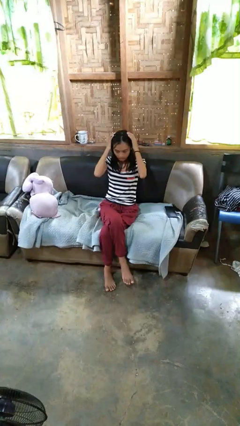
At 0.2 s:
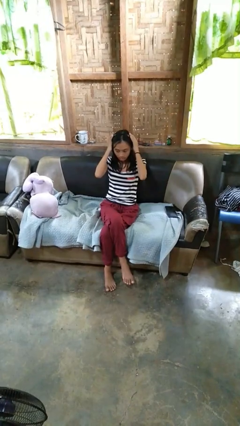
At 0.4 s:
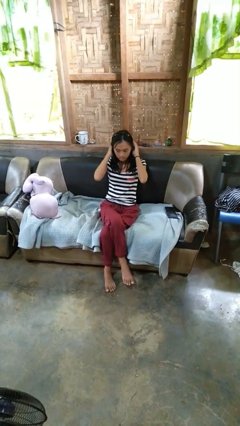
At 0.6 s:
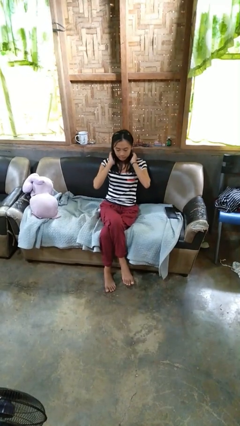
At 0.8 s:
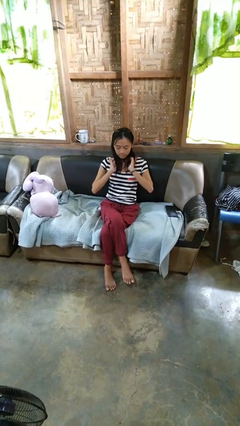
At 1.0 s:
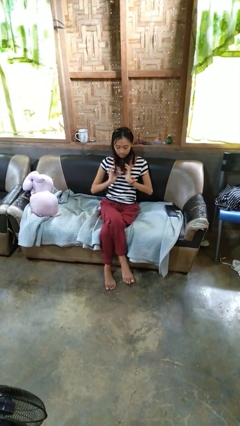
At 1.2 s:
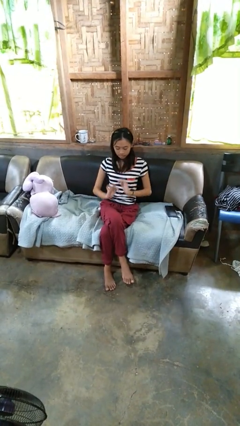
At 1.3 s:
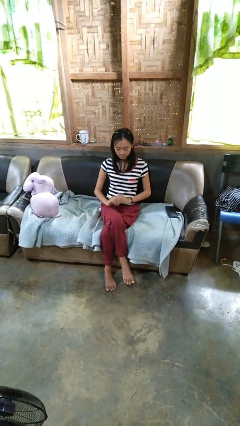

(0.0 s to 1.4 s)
person strokes hair

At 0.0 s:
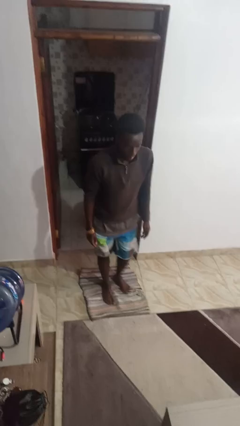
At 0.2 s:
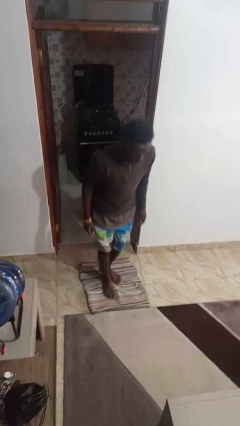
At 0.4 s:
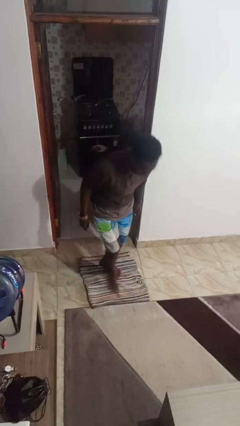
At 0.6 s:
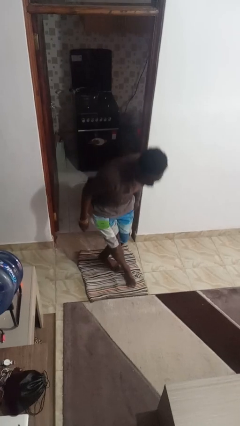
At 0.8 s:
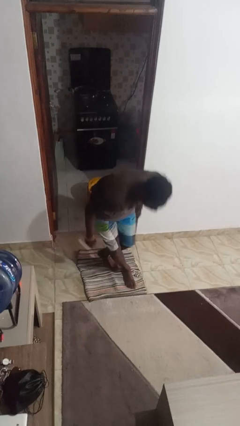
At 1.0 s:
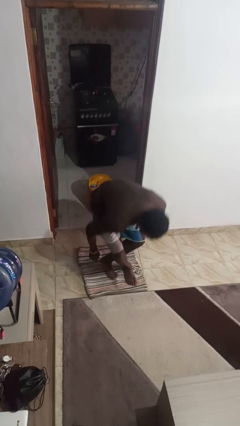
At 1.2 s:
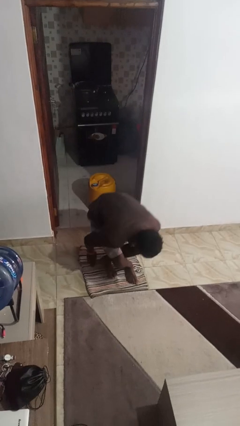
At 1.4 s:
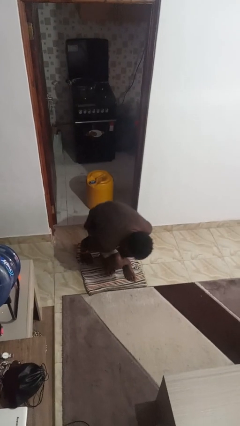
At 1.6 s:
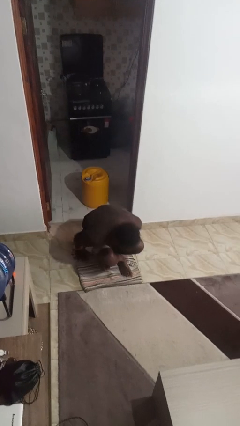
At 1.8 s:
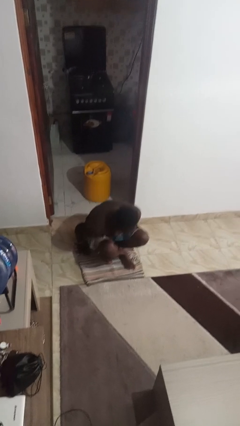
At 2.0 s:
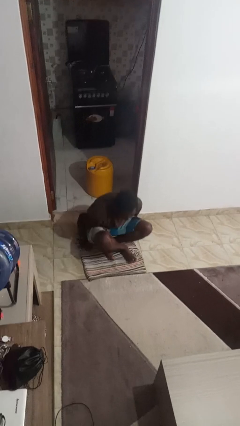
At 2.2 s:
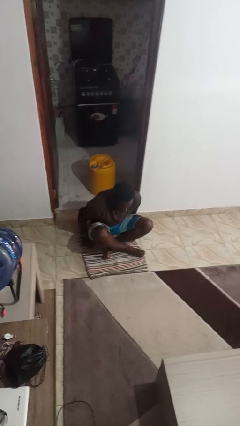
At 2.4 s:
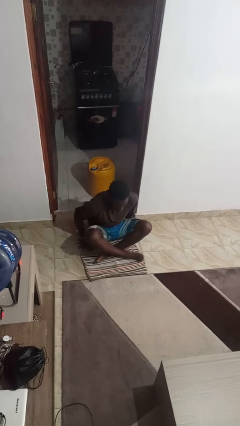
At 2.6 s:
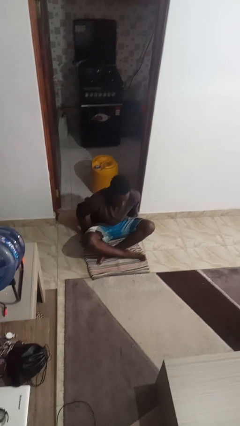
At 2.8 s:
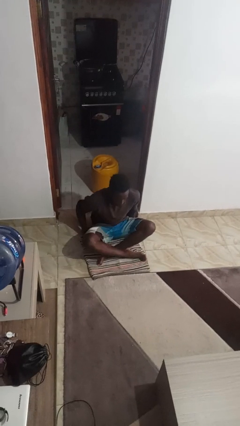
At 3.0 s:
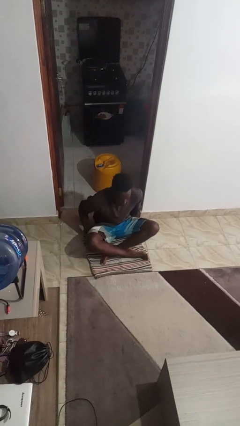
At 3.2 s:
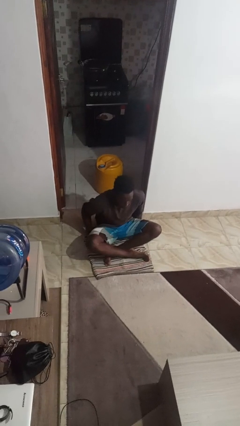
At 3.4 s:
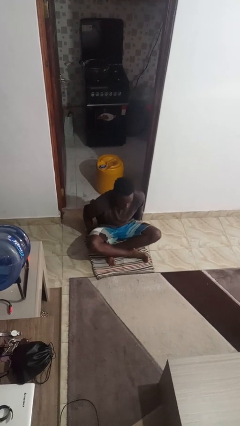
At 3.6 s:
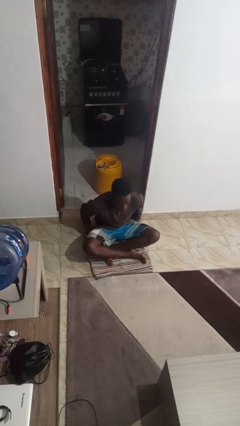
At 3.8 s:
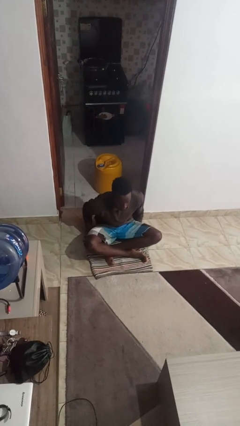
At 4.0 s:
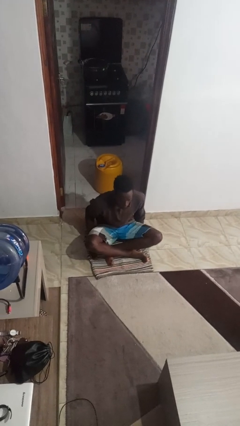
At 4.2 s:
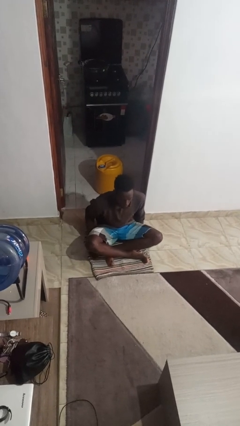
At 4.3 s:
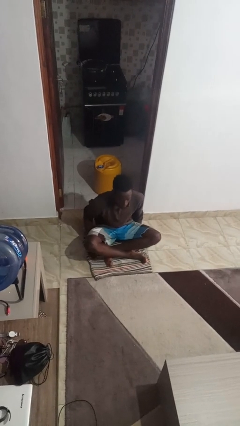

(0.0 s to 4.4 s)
person sits crisscross

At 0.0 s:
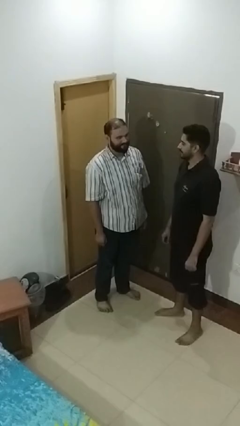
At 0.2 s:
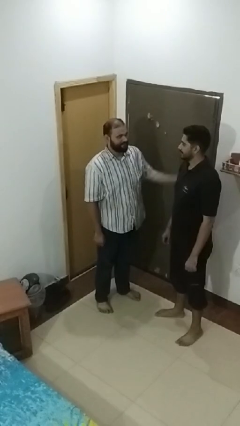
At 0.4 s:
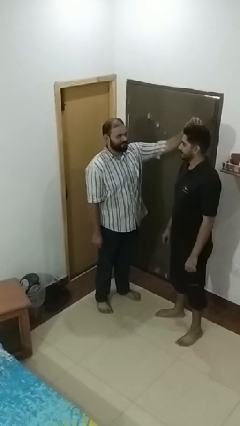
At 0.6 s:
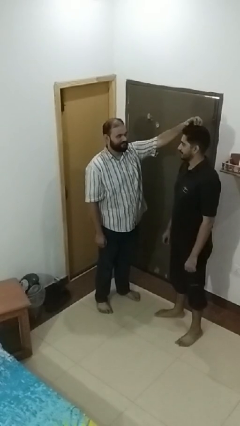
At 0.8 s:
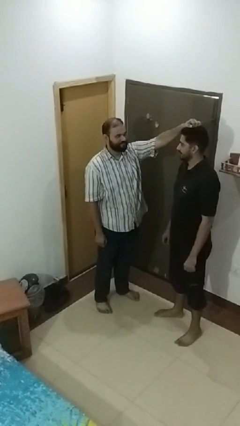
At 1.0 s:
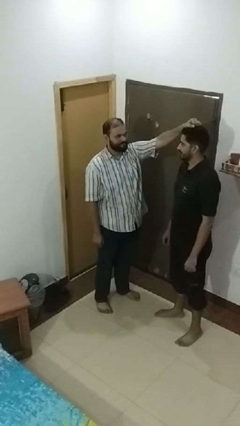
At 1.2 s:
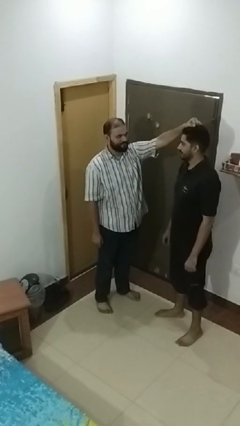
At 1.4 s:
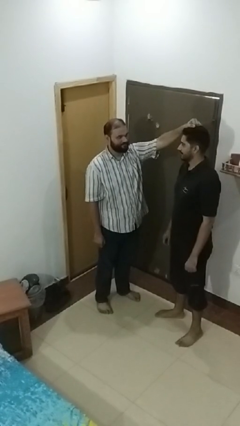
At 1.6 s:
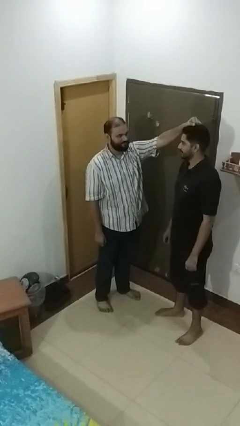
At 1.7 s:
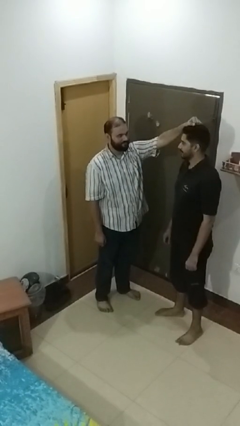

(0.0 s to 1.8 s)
person grabs person by hair

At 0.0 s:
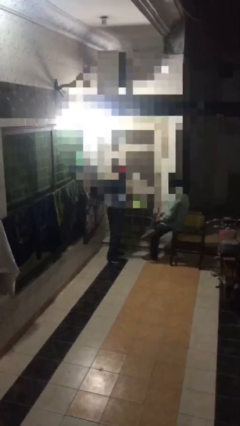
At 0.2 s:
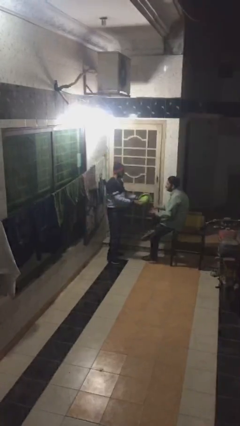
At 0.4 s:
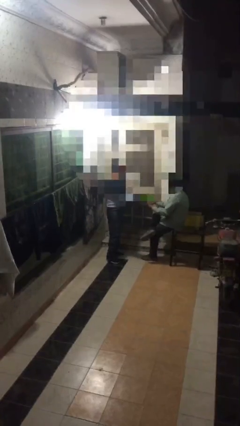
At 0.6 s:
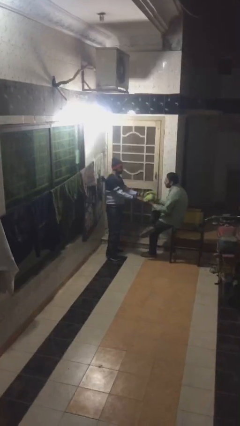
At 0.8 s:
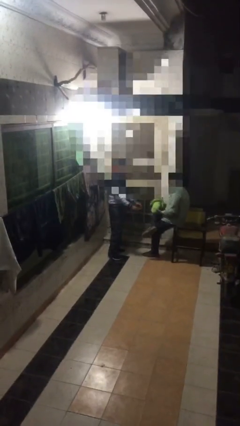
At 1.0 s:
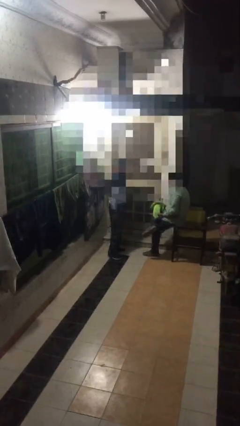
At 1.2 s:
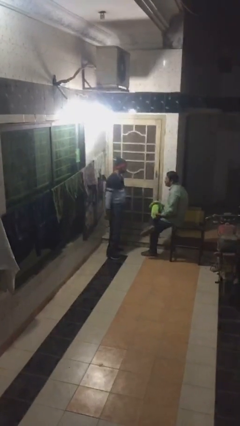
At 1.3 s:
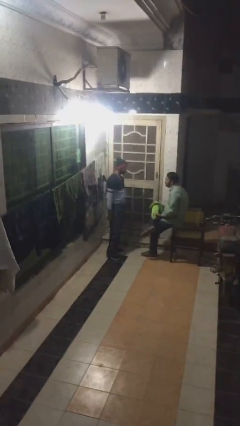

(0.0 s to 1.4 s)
person transfers object to person

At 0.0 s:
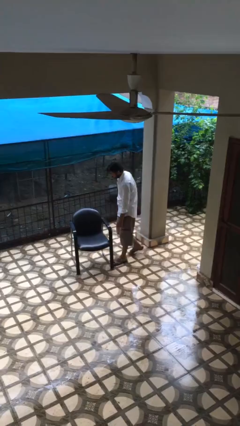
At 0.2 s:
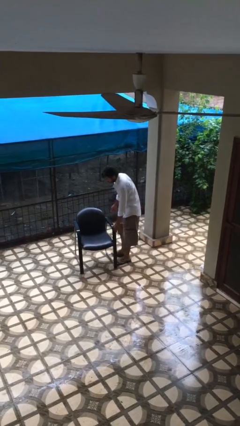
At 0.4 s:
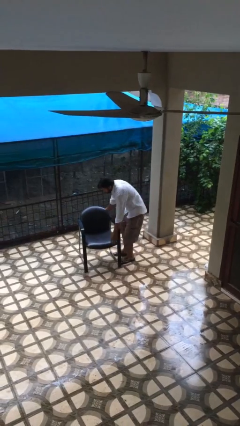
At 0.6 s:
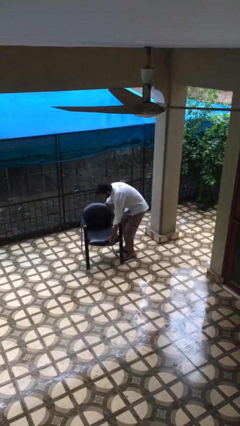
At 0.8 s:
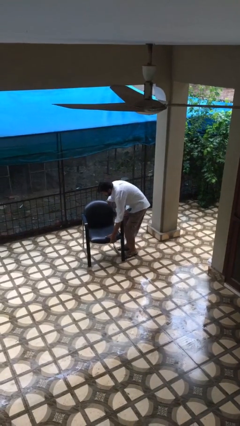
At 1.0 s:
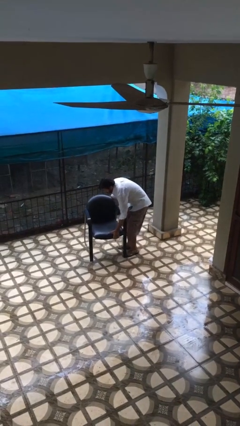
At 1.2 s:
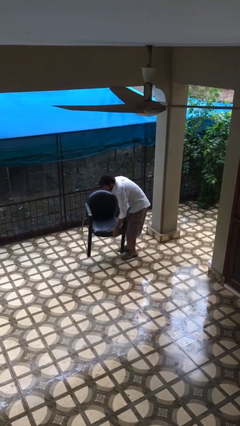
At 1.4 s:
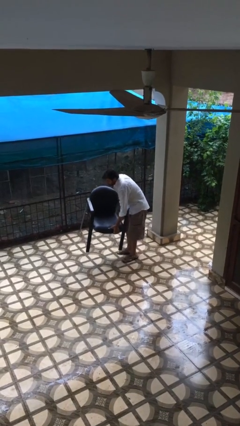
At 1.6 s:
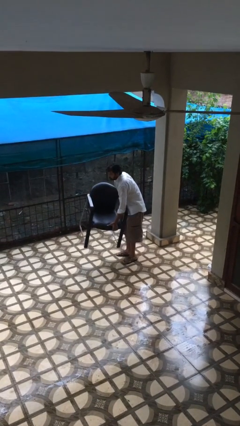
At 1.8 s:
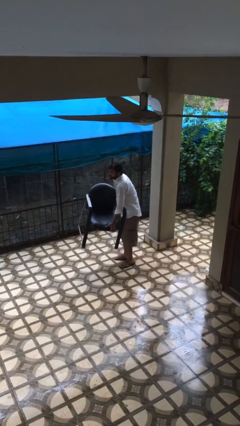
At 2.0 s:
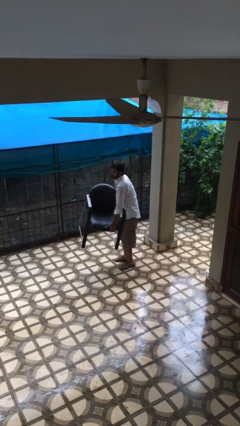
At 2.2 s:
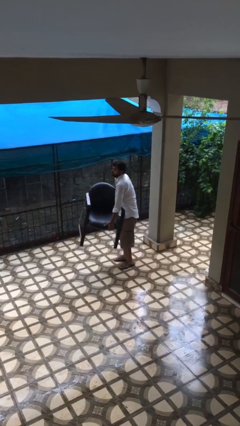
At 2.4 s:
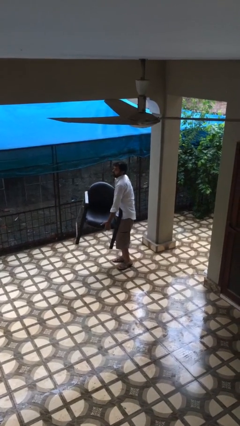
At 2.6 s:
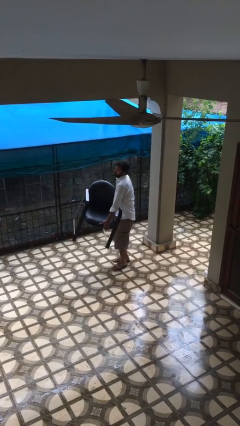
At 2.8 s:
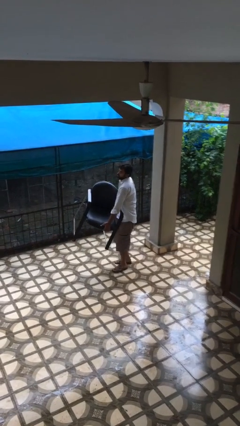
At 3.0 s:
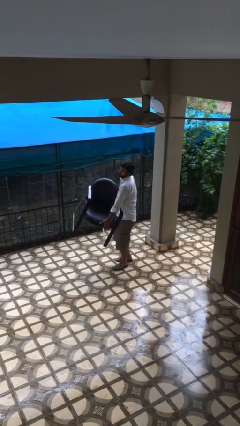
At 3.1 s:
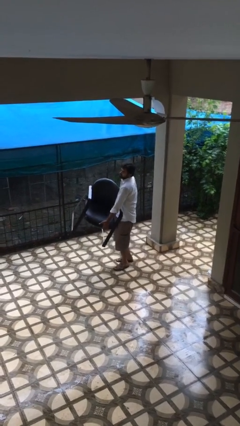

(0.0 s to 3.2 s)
person picks up object from floor

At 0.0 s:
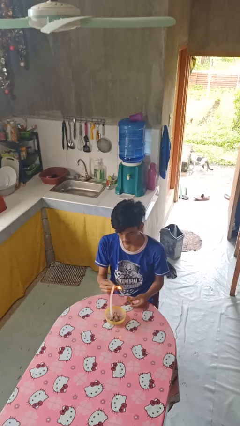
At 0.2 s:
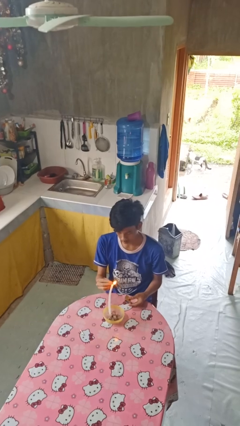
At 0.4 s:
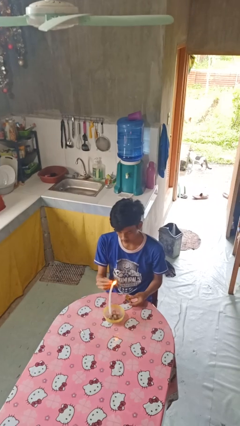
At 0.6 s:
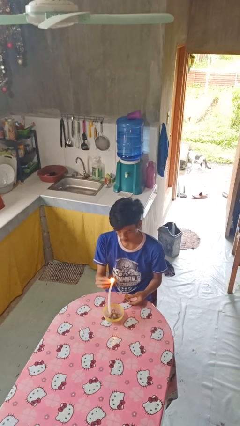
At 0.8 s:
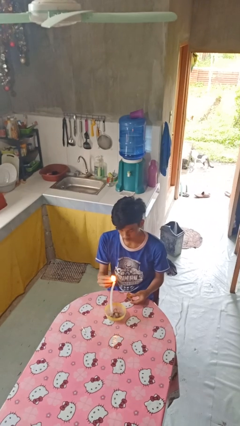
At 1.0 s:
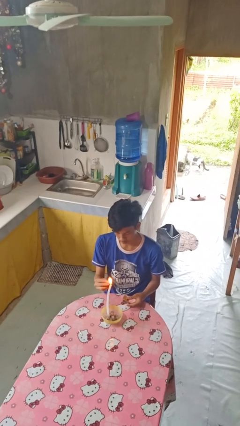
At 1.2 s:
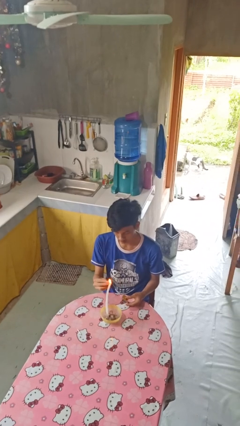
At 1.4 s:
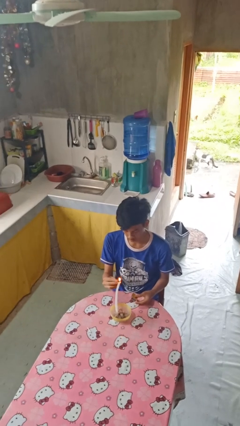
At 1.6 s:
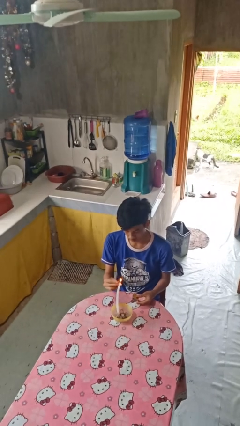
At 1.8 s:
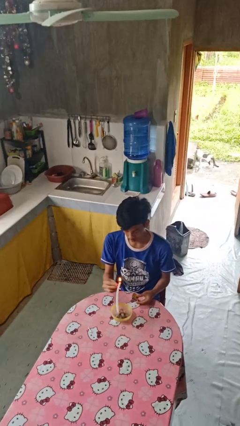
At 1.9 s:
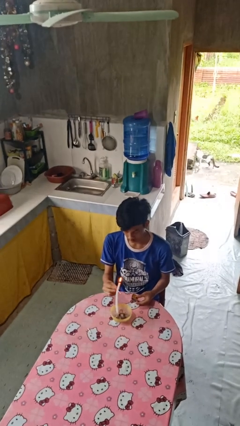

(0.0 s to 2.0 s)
person lights candle

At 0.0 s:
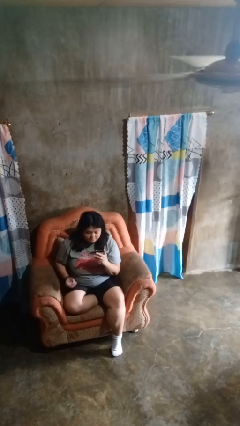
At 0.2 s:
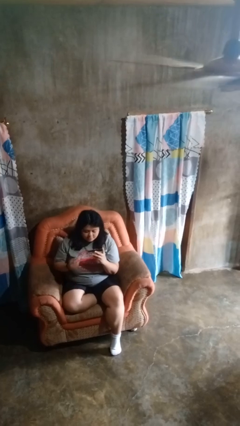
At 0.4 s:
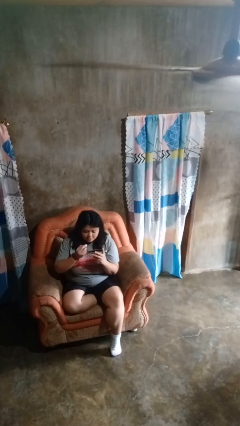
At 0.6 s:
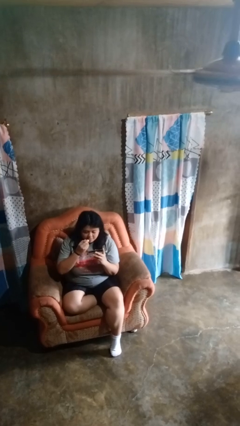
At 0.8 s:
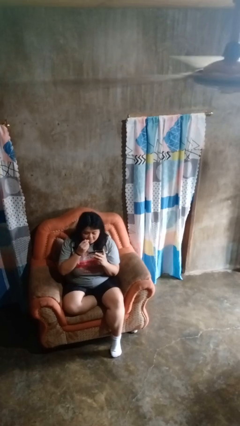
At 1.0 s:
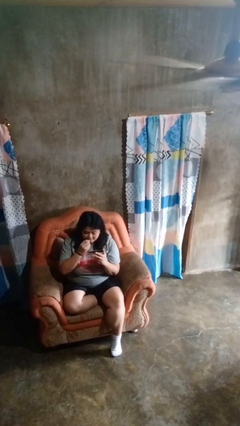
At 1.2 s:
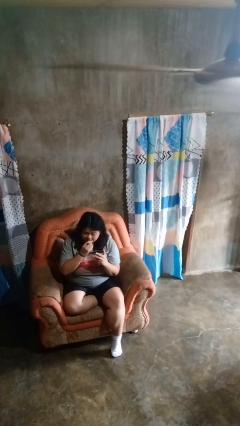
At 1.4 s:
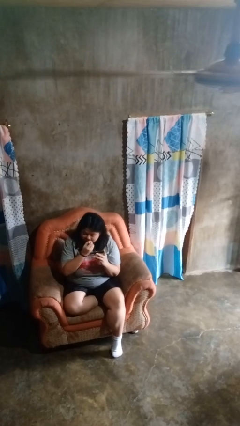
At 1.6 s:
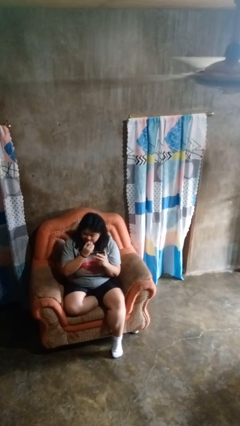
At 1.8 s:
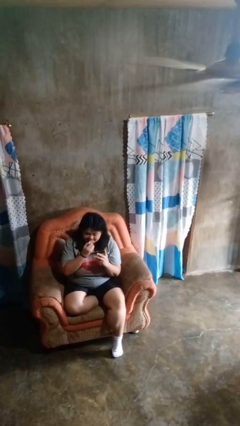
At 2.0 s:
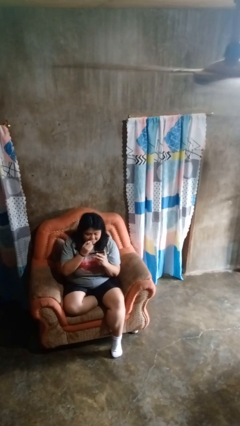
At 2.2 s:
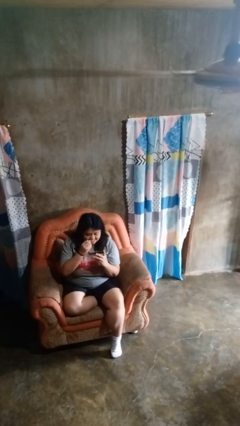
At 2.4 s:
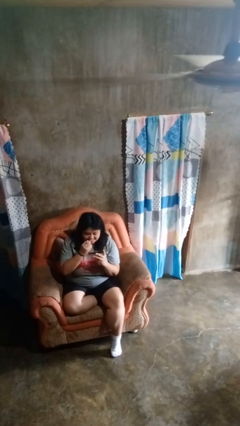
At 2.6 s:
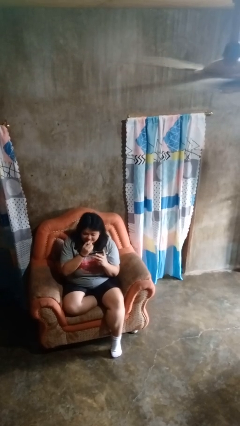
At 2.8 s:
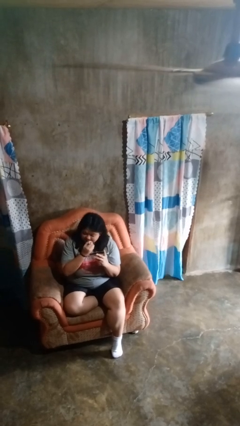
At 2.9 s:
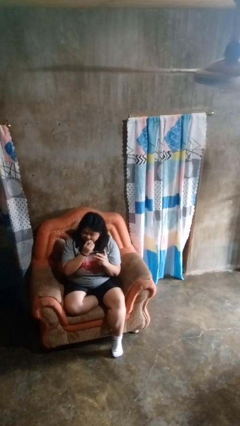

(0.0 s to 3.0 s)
person applies lip makeup
